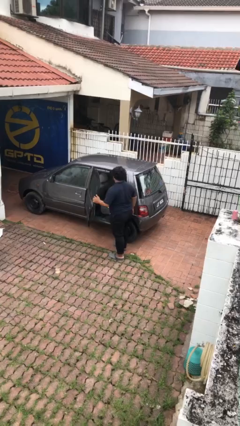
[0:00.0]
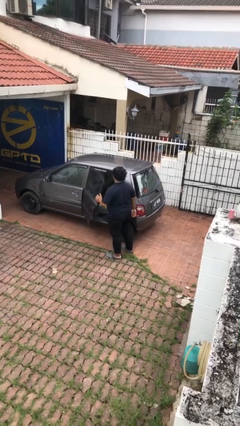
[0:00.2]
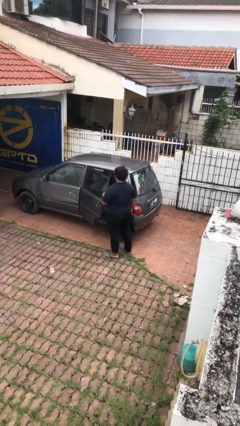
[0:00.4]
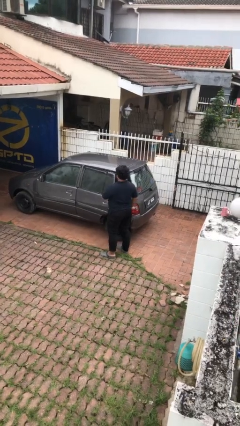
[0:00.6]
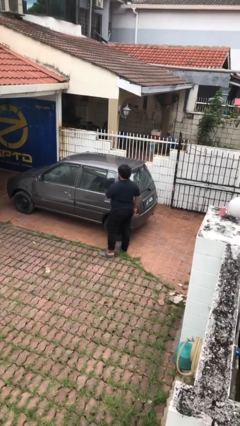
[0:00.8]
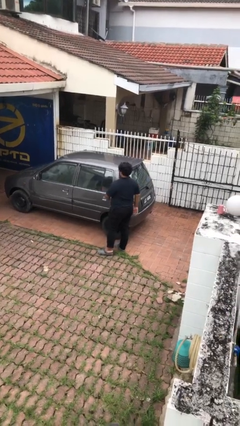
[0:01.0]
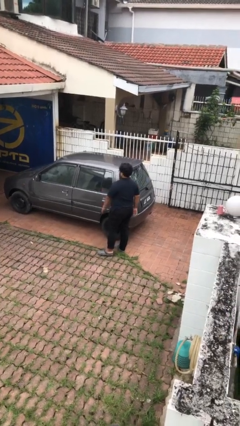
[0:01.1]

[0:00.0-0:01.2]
person closes car door

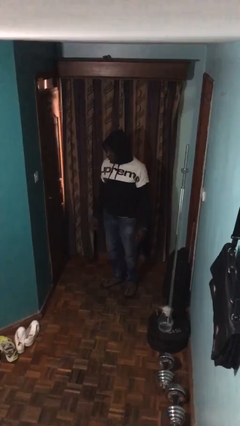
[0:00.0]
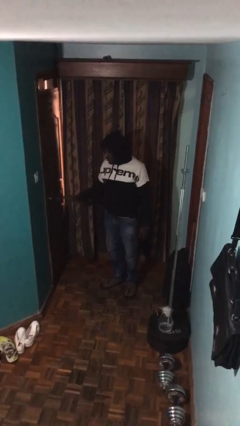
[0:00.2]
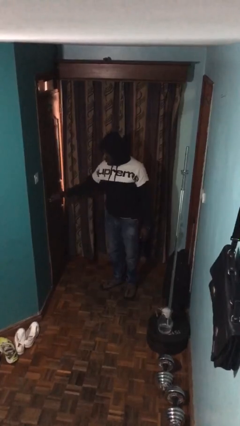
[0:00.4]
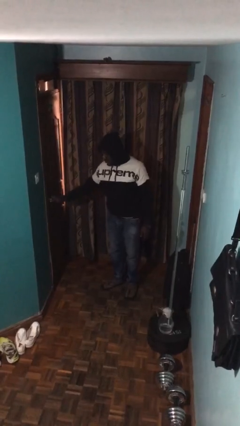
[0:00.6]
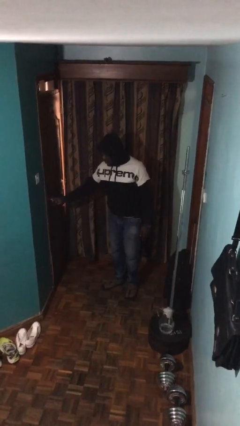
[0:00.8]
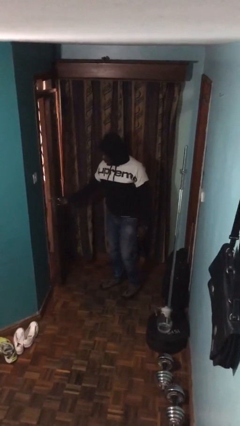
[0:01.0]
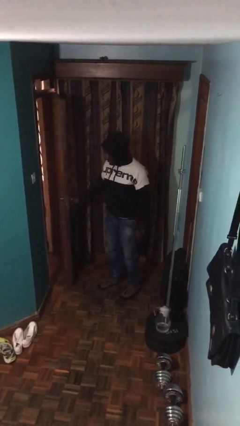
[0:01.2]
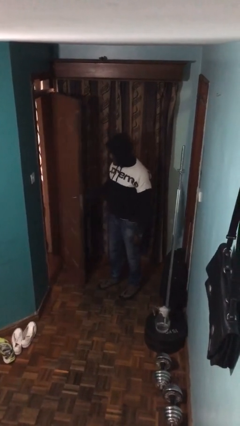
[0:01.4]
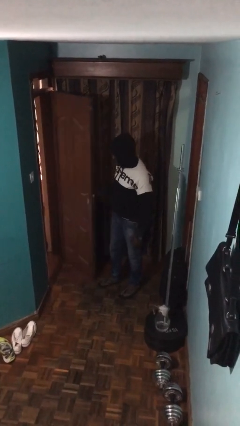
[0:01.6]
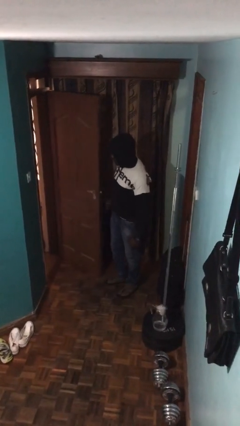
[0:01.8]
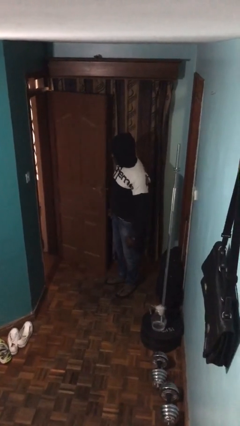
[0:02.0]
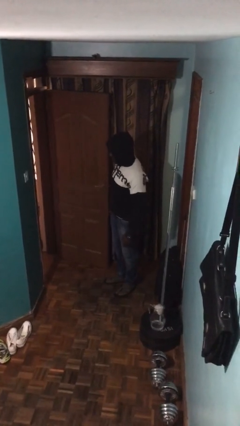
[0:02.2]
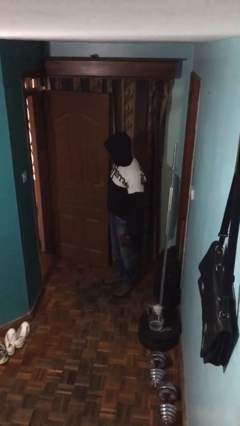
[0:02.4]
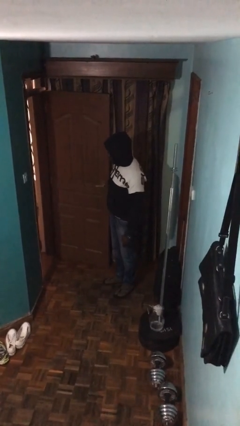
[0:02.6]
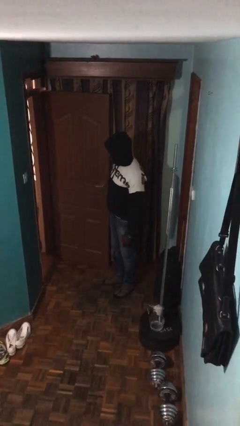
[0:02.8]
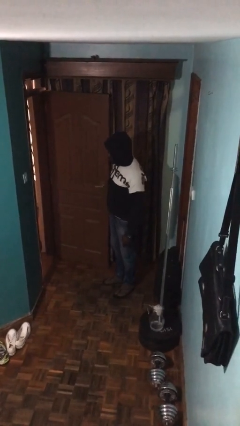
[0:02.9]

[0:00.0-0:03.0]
person opens facility door

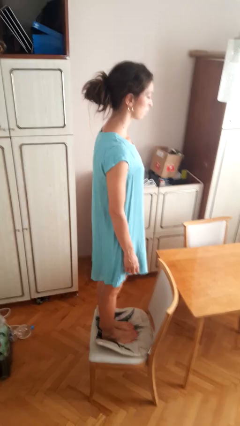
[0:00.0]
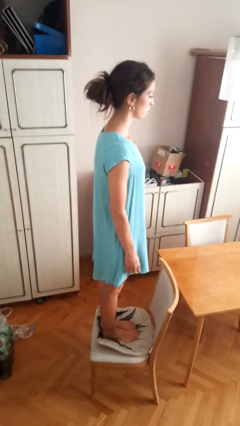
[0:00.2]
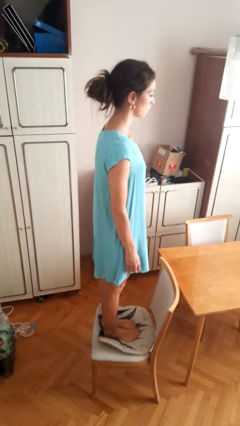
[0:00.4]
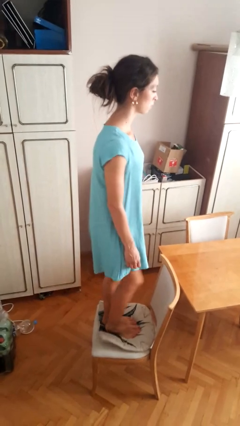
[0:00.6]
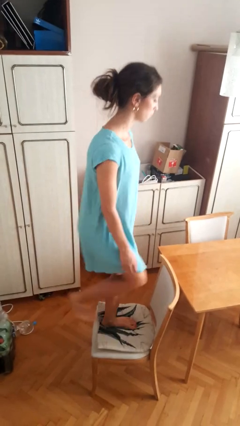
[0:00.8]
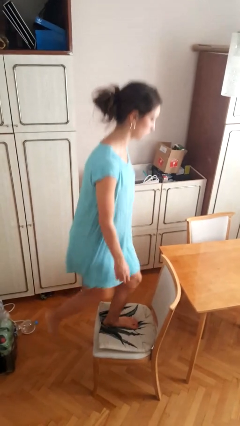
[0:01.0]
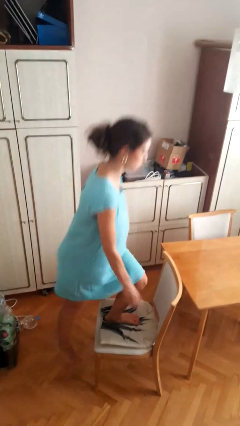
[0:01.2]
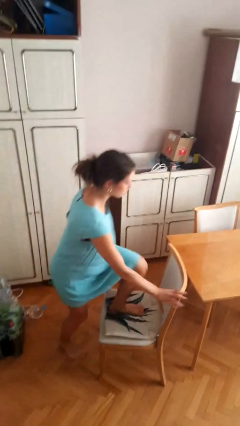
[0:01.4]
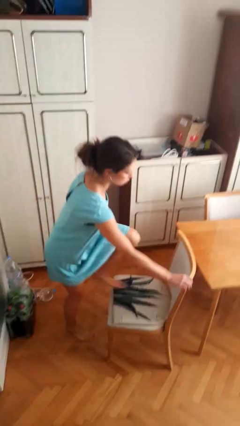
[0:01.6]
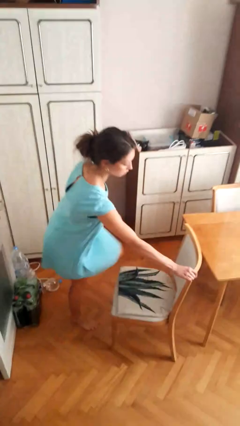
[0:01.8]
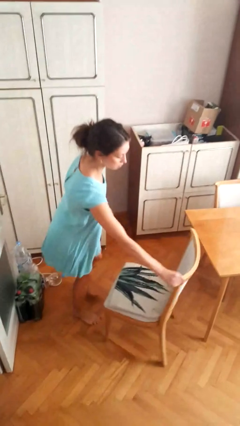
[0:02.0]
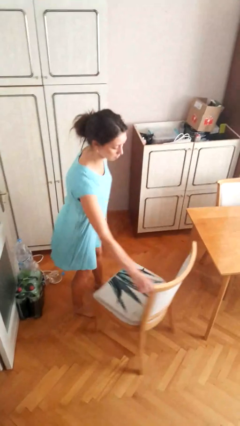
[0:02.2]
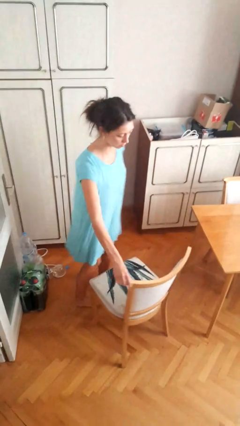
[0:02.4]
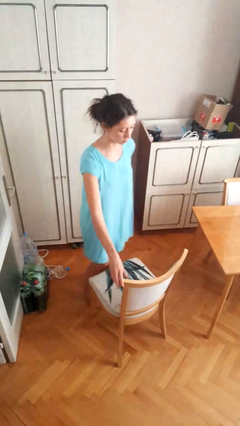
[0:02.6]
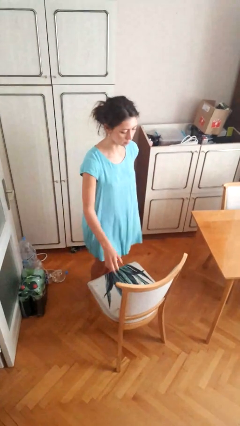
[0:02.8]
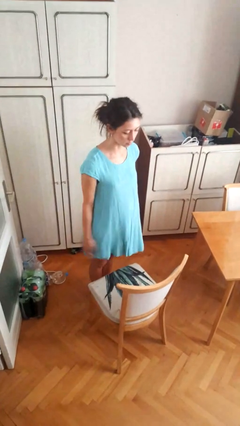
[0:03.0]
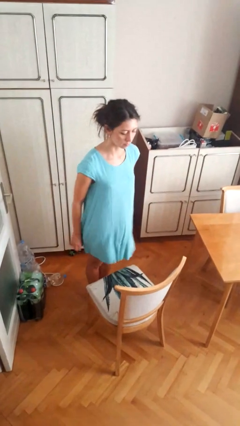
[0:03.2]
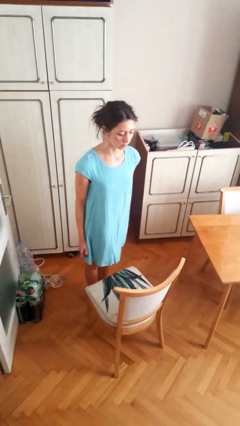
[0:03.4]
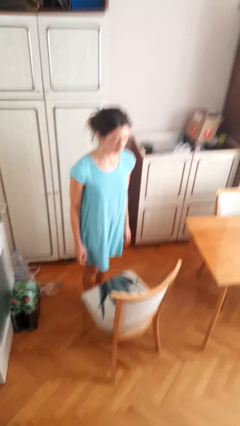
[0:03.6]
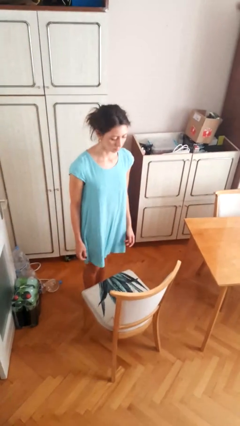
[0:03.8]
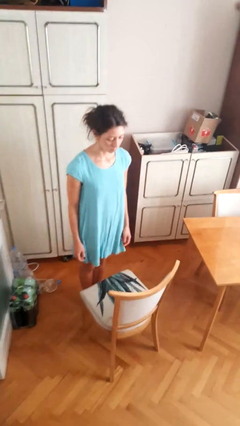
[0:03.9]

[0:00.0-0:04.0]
person climbs off chair

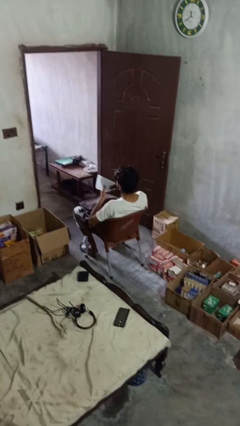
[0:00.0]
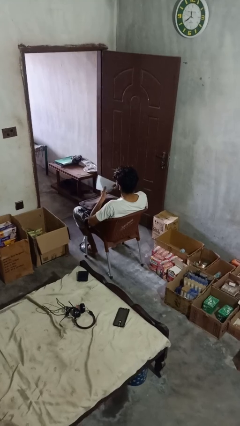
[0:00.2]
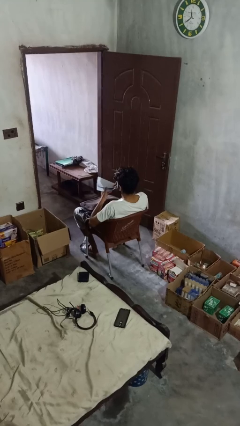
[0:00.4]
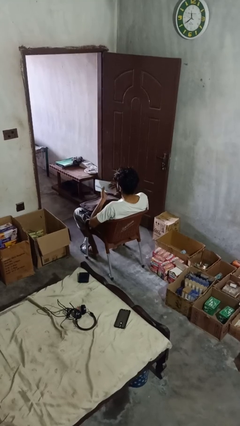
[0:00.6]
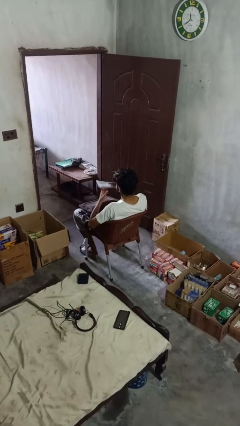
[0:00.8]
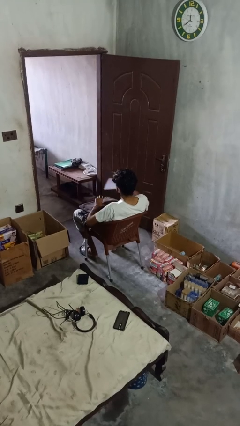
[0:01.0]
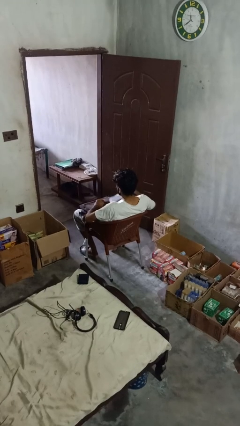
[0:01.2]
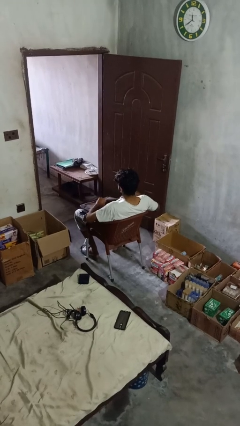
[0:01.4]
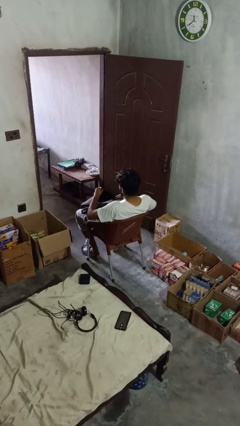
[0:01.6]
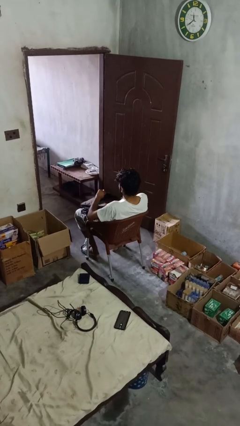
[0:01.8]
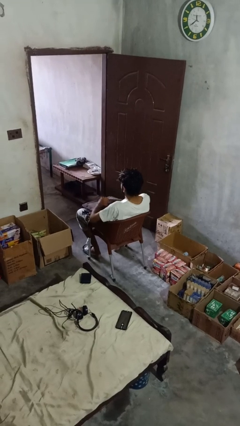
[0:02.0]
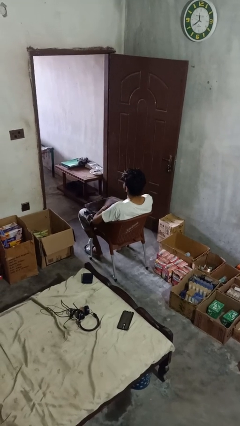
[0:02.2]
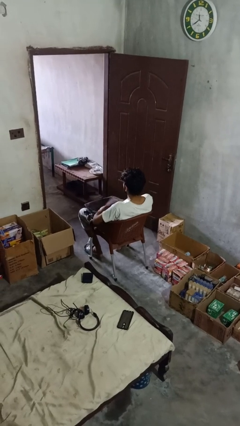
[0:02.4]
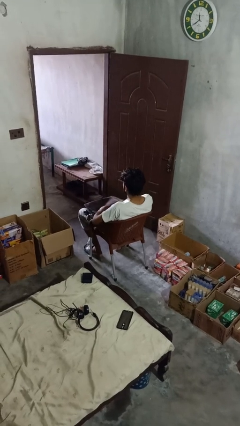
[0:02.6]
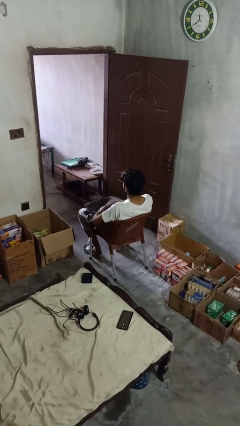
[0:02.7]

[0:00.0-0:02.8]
person puts object into backpack

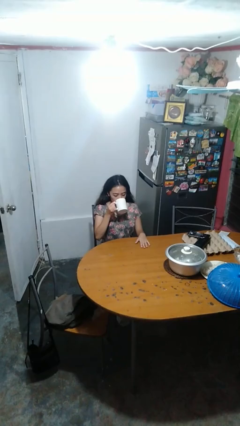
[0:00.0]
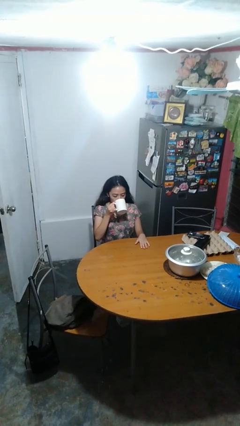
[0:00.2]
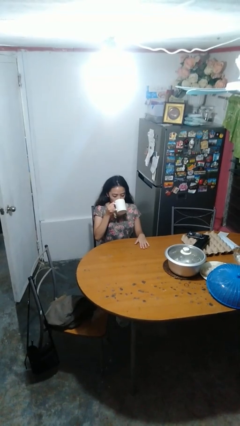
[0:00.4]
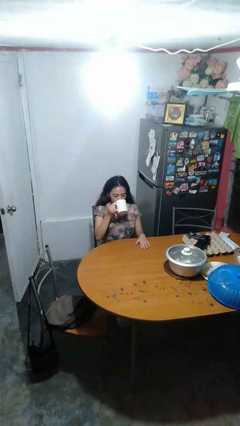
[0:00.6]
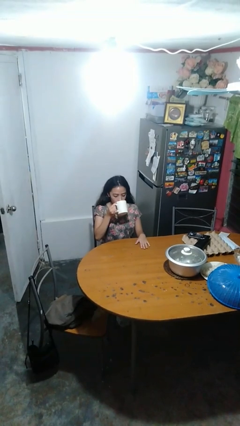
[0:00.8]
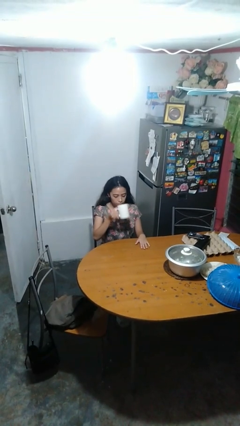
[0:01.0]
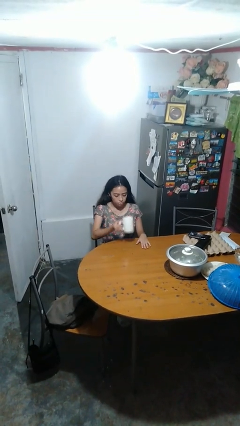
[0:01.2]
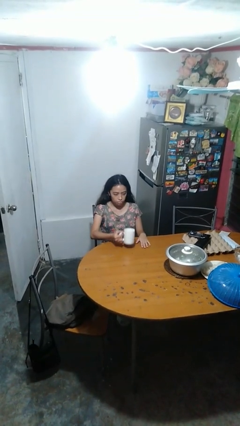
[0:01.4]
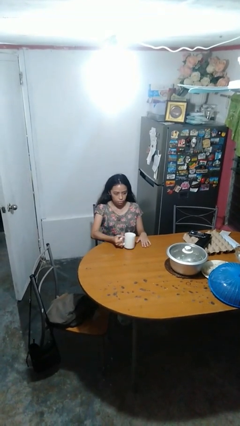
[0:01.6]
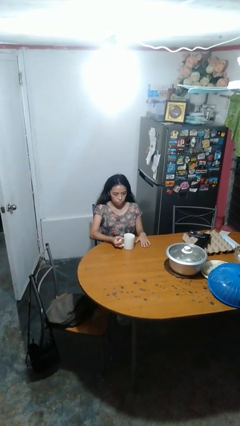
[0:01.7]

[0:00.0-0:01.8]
person puts down object on table

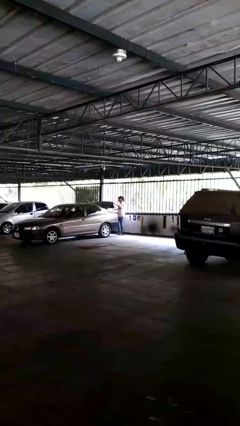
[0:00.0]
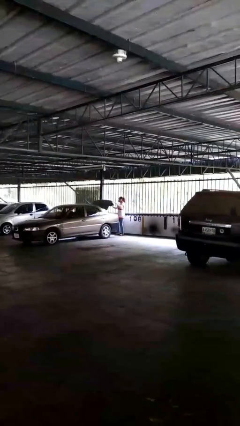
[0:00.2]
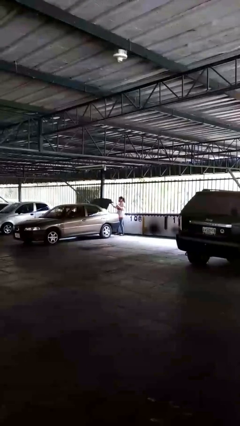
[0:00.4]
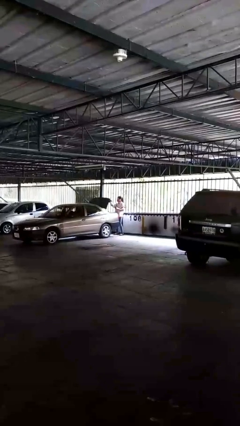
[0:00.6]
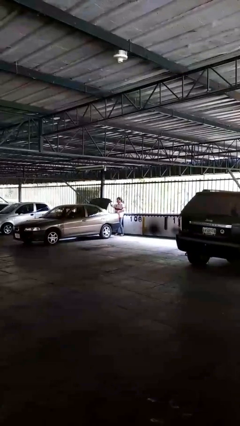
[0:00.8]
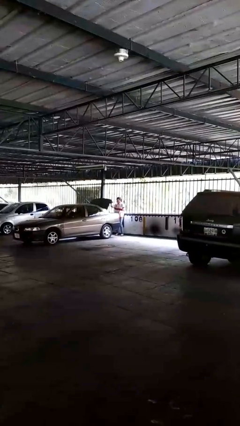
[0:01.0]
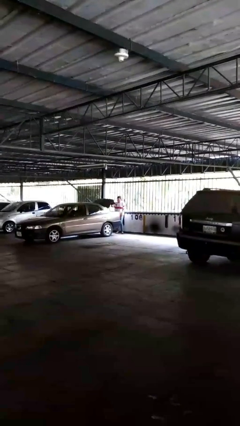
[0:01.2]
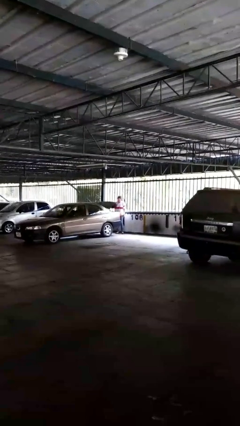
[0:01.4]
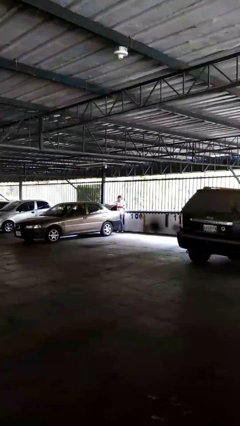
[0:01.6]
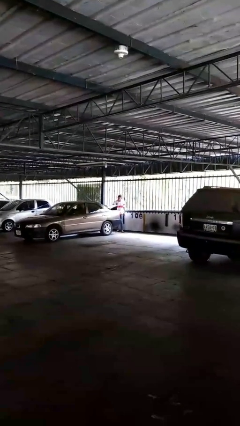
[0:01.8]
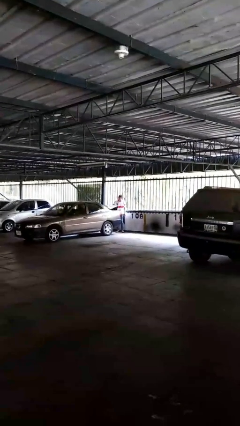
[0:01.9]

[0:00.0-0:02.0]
person opens car trunk

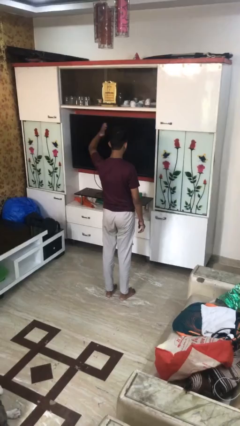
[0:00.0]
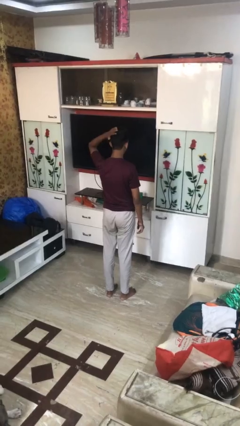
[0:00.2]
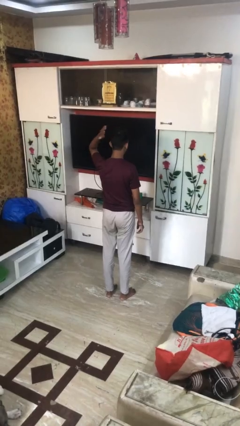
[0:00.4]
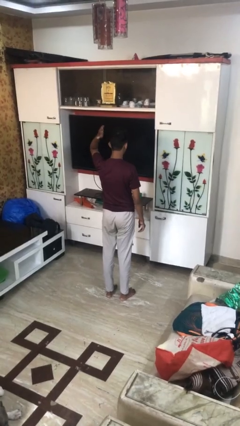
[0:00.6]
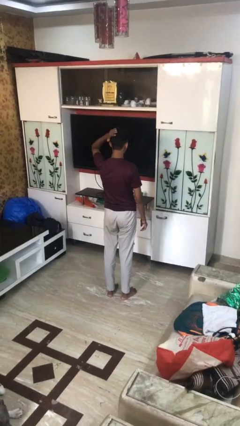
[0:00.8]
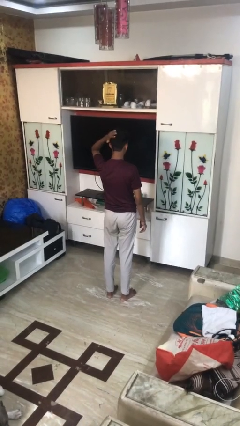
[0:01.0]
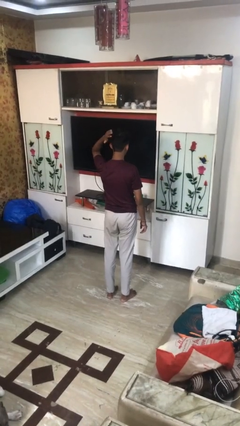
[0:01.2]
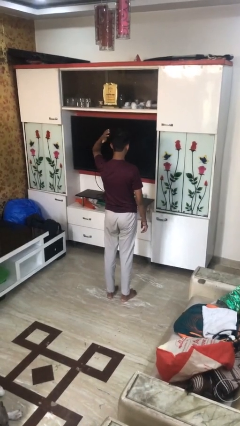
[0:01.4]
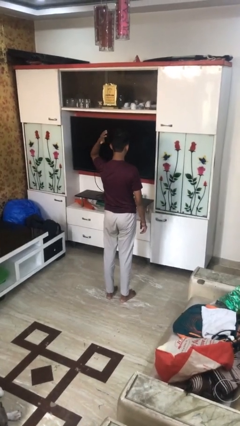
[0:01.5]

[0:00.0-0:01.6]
person pats head

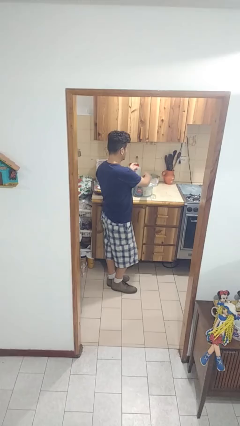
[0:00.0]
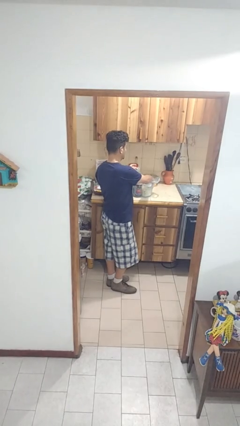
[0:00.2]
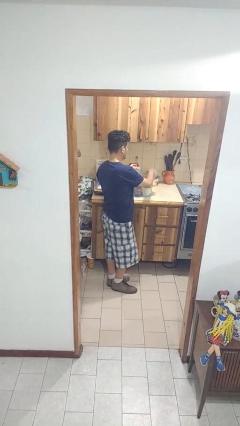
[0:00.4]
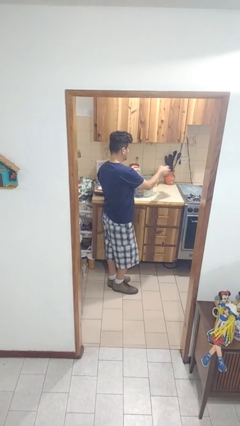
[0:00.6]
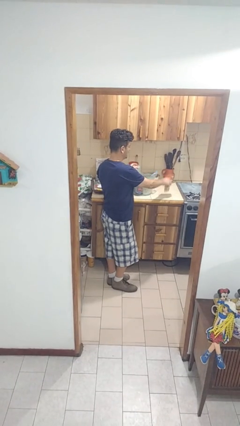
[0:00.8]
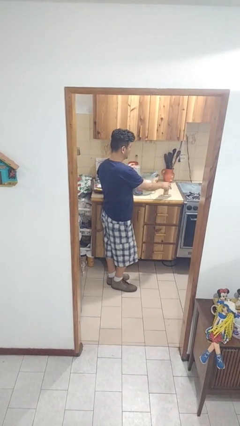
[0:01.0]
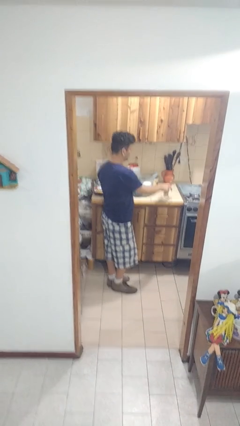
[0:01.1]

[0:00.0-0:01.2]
person takes object from bag
